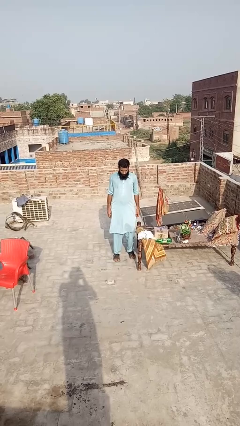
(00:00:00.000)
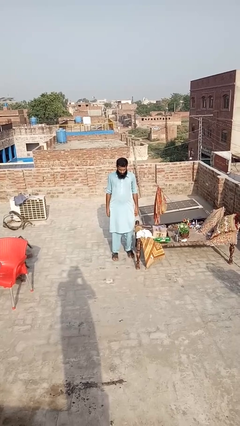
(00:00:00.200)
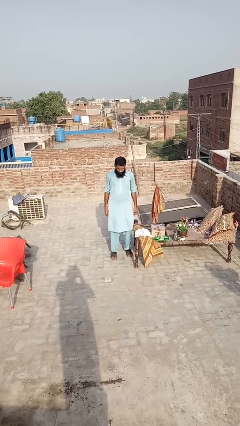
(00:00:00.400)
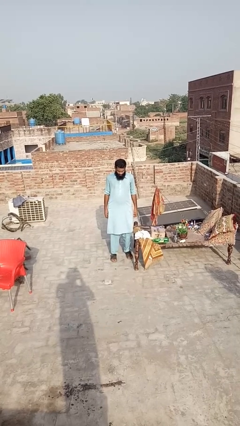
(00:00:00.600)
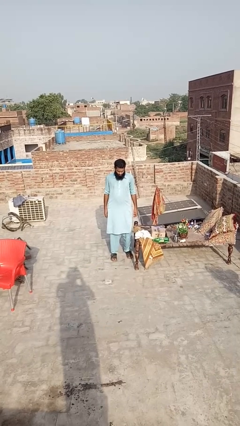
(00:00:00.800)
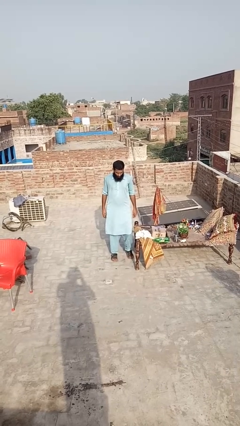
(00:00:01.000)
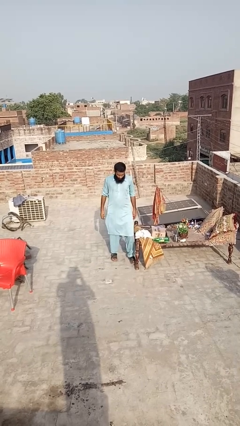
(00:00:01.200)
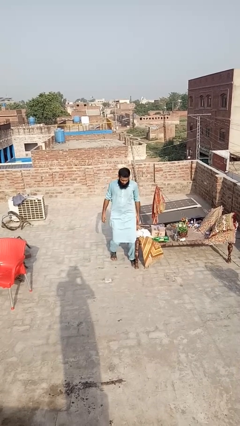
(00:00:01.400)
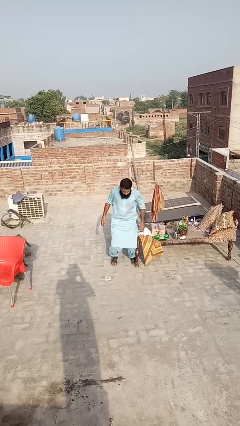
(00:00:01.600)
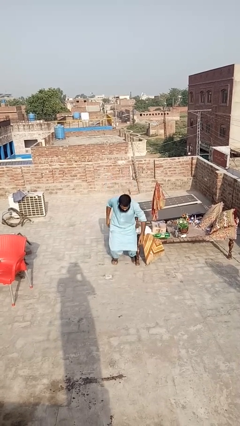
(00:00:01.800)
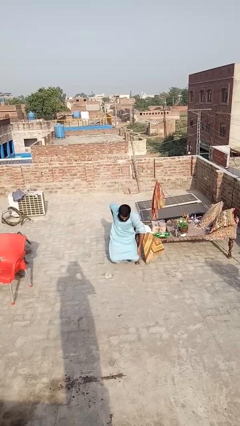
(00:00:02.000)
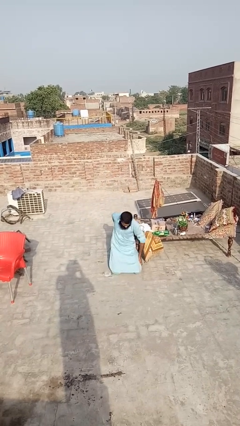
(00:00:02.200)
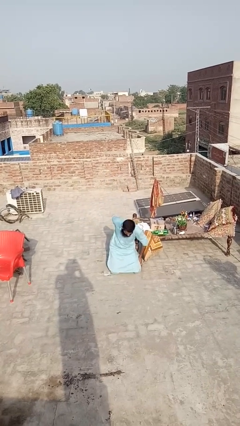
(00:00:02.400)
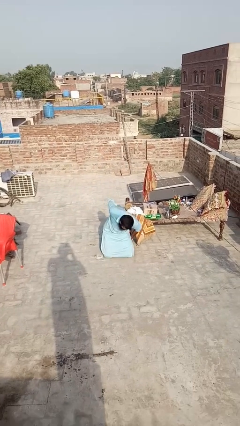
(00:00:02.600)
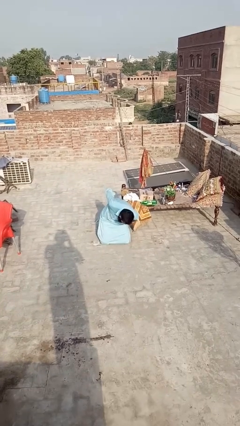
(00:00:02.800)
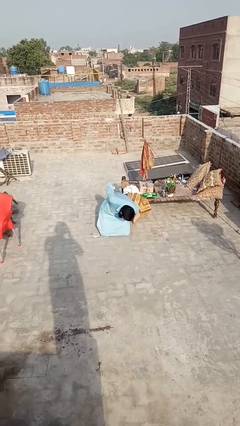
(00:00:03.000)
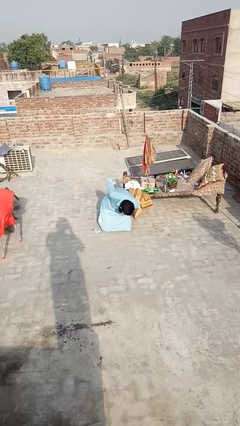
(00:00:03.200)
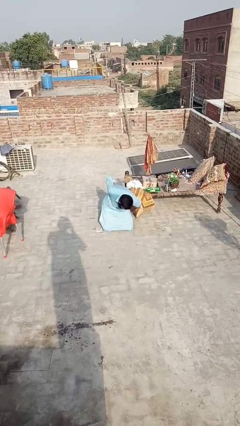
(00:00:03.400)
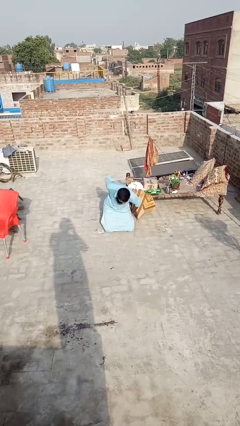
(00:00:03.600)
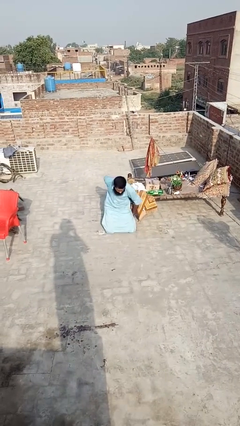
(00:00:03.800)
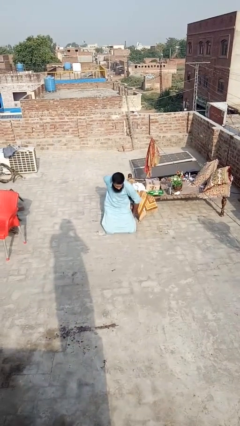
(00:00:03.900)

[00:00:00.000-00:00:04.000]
person bumps into table

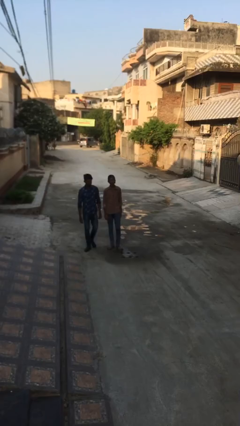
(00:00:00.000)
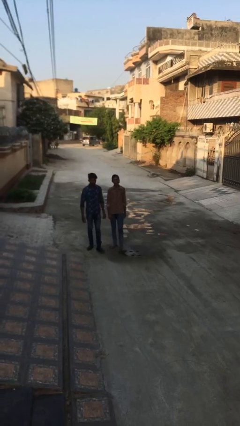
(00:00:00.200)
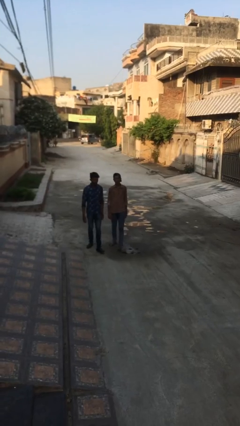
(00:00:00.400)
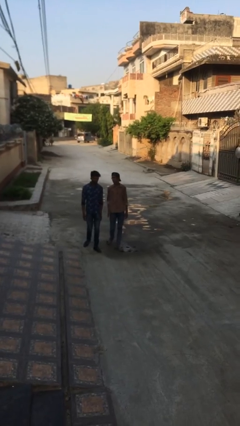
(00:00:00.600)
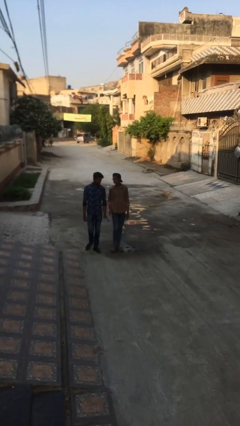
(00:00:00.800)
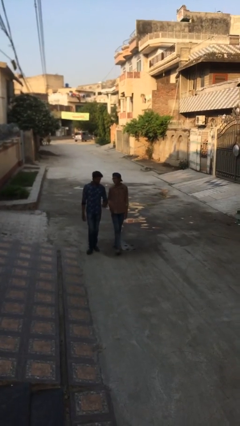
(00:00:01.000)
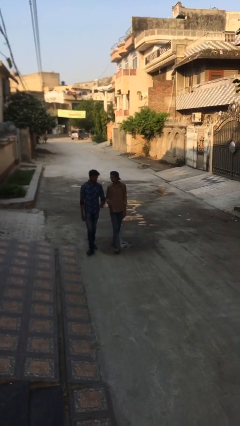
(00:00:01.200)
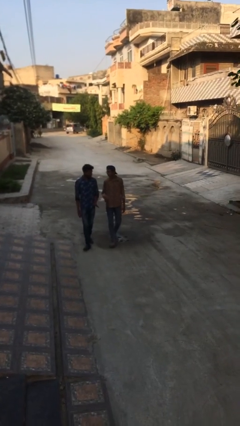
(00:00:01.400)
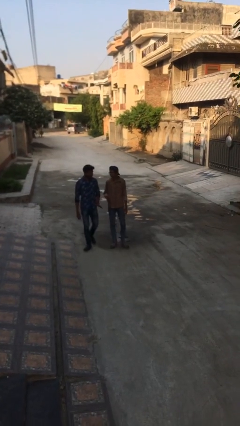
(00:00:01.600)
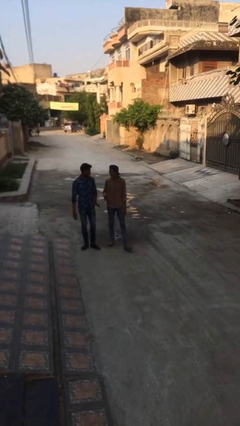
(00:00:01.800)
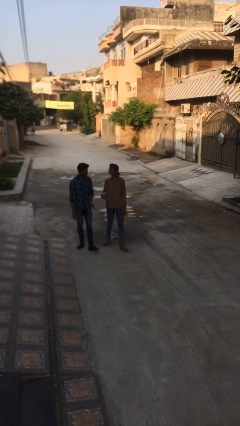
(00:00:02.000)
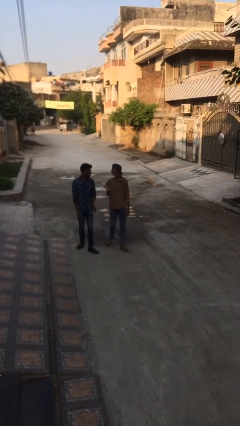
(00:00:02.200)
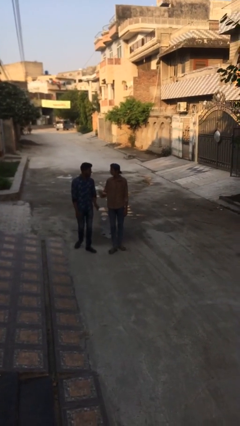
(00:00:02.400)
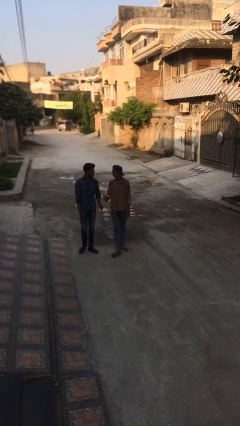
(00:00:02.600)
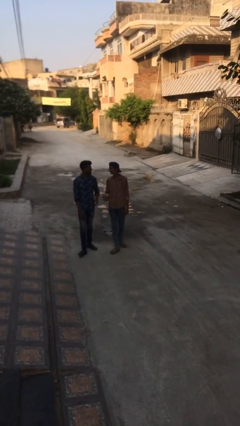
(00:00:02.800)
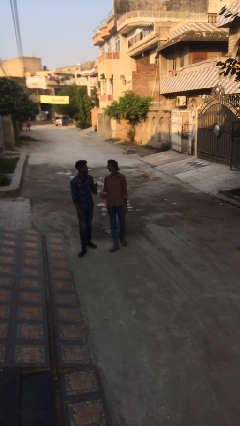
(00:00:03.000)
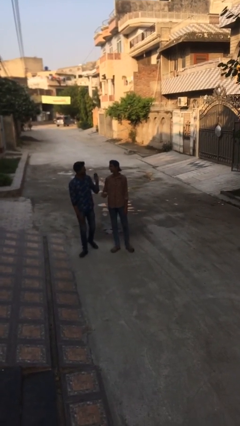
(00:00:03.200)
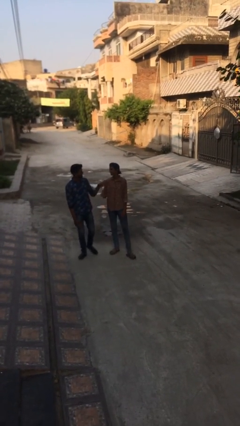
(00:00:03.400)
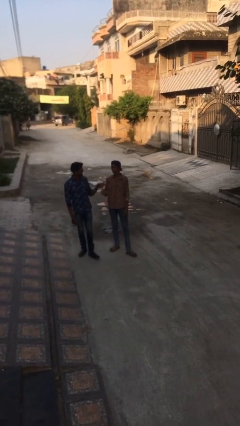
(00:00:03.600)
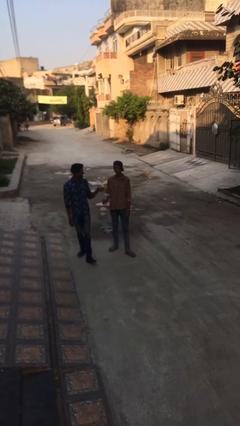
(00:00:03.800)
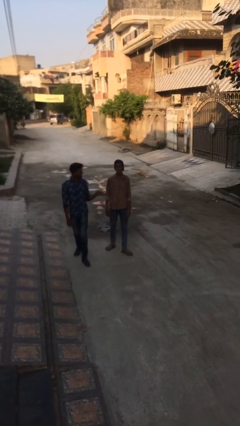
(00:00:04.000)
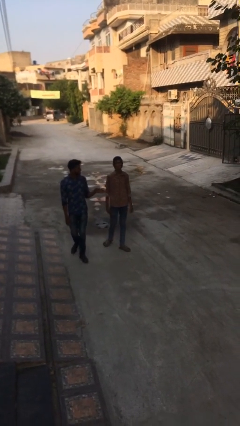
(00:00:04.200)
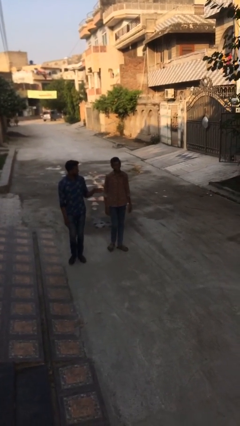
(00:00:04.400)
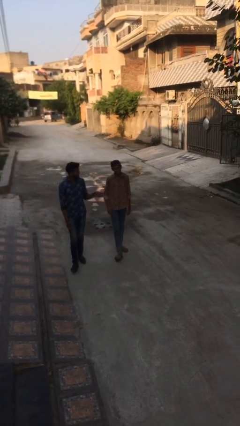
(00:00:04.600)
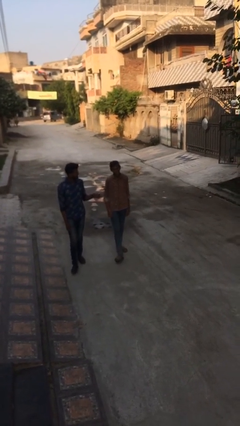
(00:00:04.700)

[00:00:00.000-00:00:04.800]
person talks to person

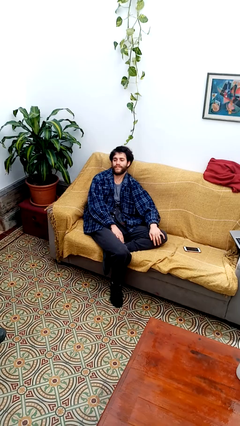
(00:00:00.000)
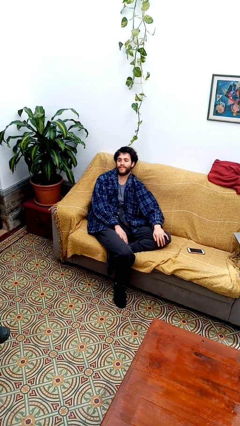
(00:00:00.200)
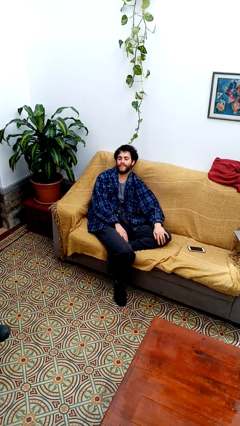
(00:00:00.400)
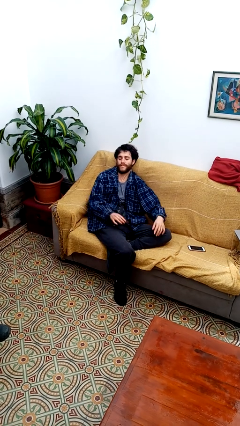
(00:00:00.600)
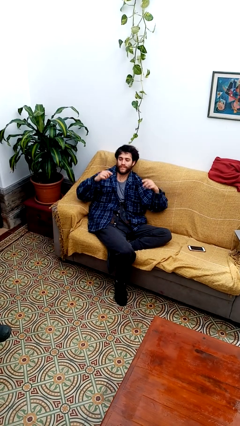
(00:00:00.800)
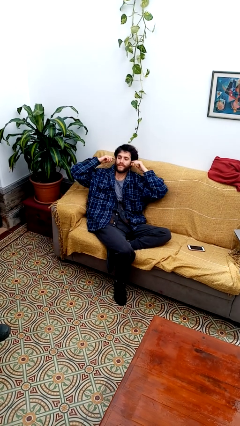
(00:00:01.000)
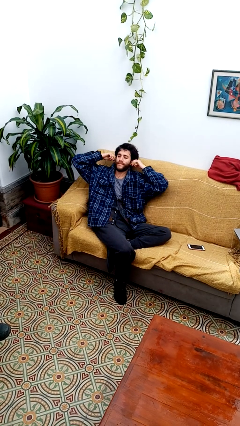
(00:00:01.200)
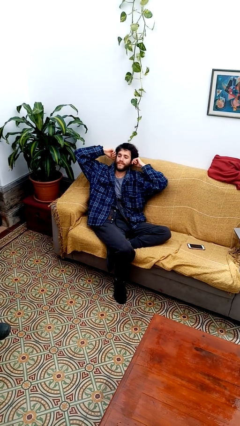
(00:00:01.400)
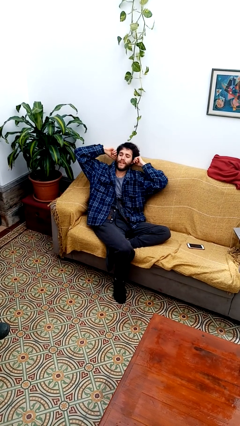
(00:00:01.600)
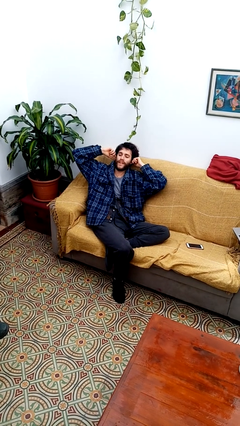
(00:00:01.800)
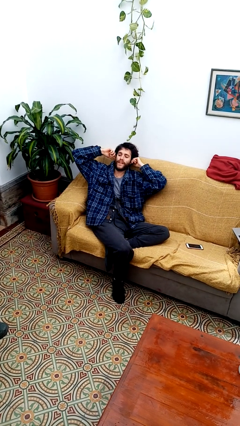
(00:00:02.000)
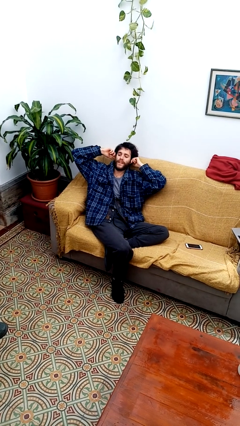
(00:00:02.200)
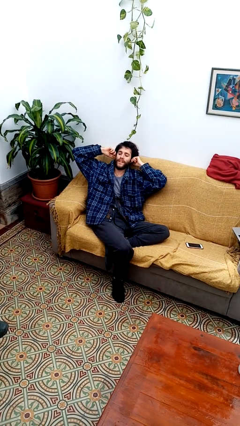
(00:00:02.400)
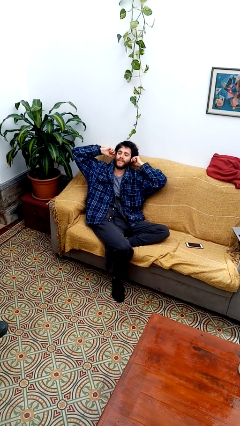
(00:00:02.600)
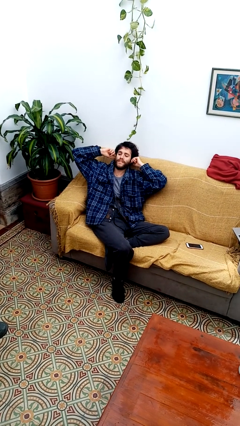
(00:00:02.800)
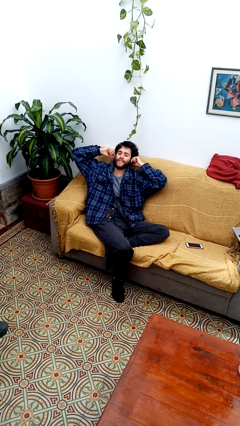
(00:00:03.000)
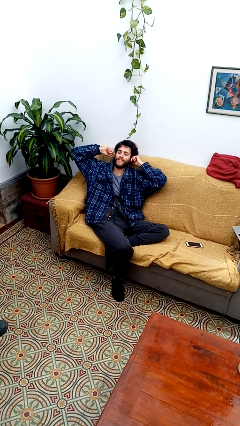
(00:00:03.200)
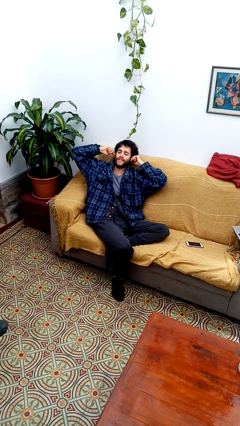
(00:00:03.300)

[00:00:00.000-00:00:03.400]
person puts fingers in ear

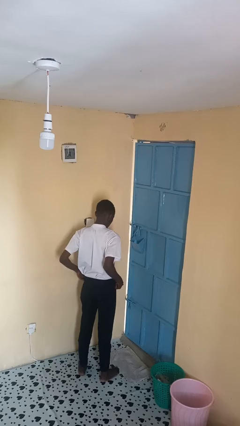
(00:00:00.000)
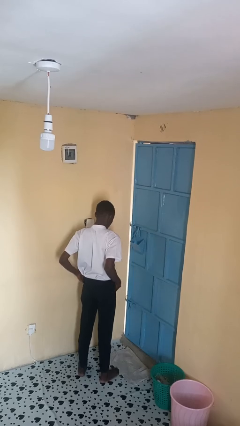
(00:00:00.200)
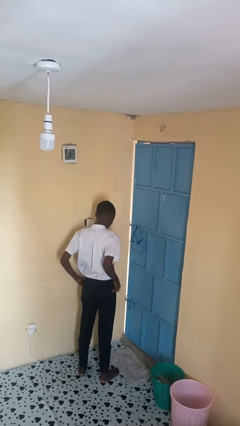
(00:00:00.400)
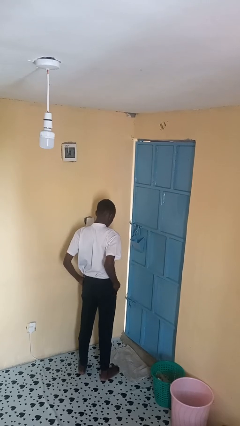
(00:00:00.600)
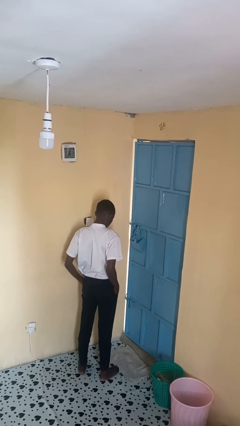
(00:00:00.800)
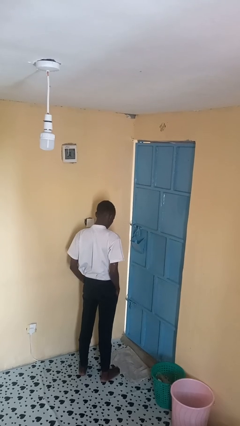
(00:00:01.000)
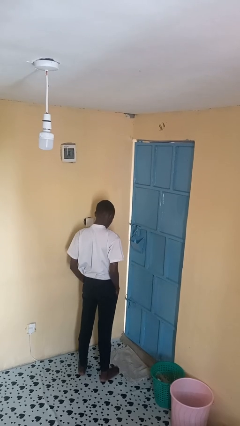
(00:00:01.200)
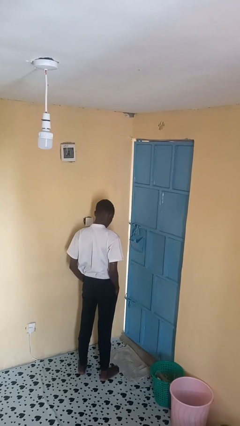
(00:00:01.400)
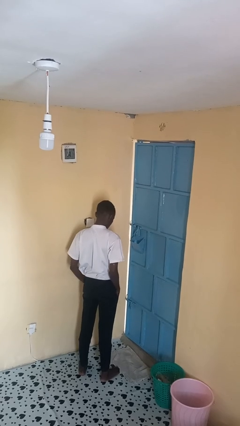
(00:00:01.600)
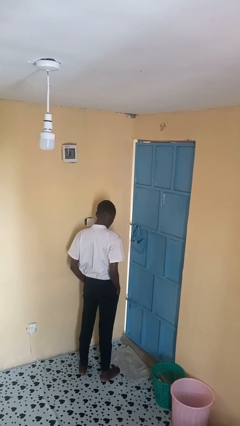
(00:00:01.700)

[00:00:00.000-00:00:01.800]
person puts hands in back pockets

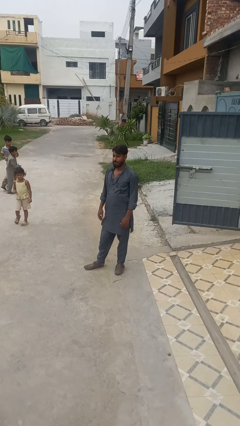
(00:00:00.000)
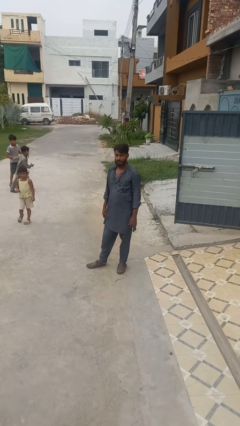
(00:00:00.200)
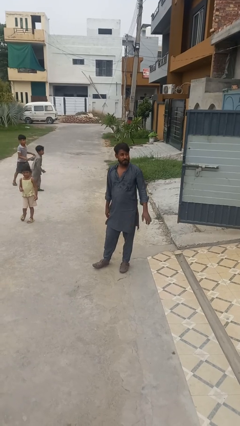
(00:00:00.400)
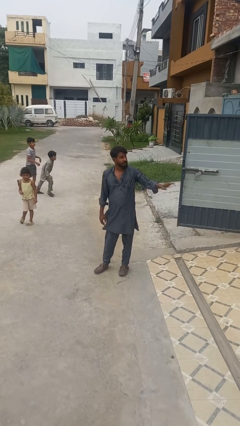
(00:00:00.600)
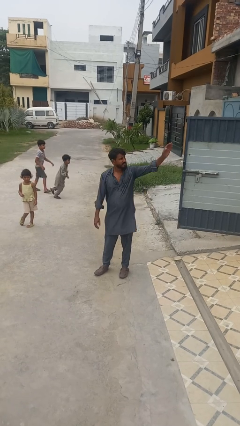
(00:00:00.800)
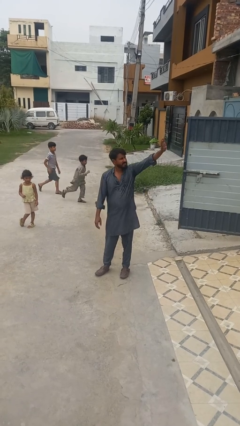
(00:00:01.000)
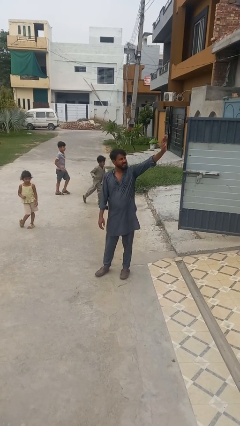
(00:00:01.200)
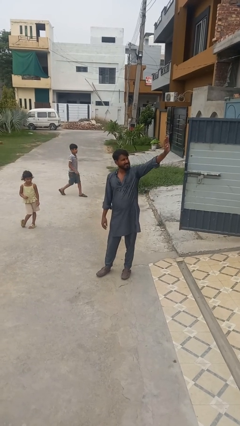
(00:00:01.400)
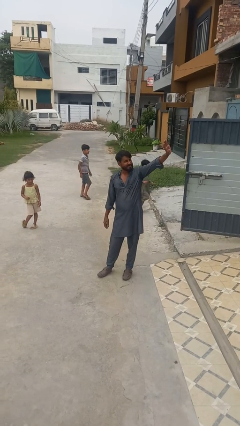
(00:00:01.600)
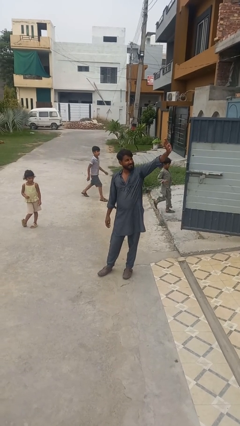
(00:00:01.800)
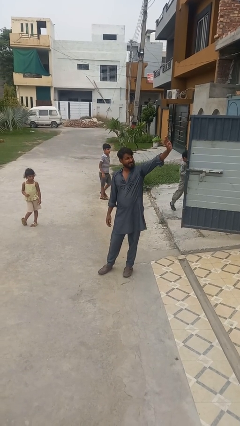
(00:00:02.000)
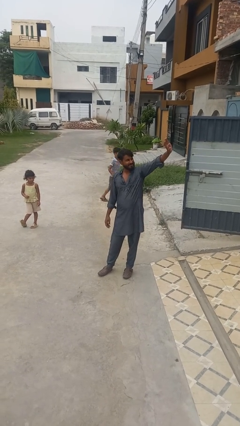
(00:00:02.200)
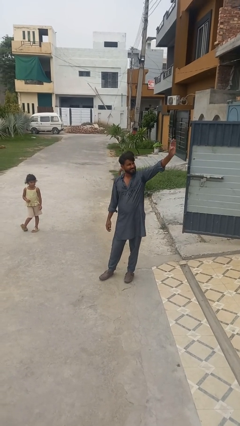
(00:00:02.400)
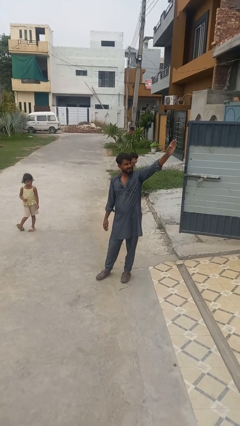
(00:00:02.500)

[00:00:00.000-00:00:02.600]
person waves at person

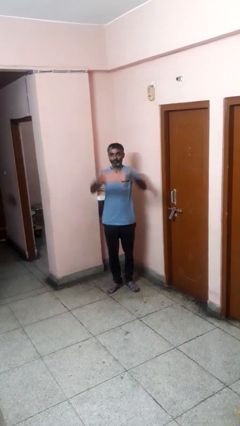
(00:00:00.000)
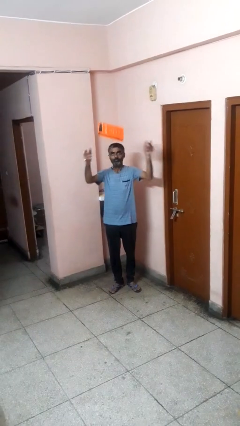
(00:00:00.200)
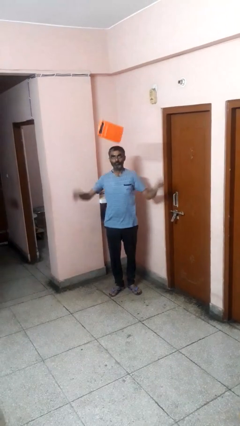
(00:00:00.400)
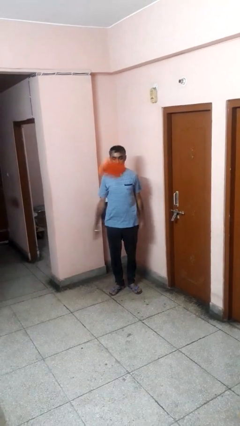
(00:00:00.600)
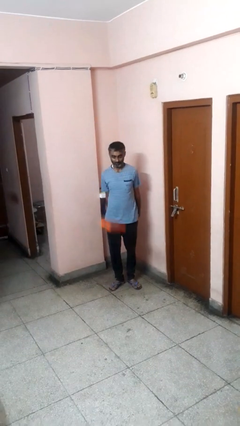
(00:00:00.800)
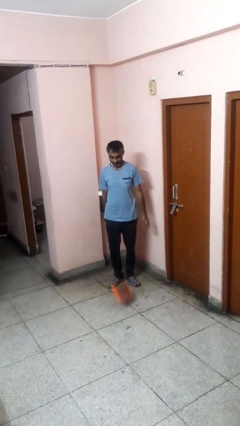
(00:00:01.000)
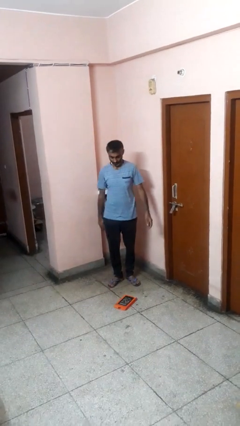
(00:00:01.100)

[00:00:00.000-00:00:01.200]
person throws object into air
